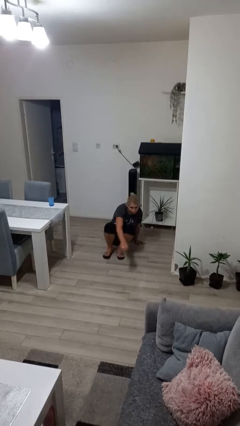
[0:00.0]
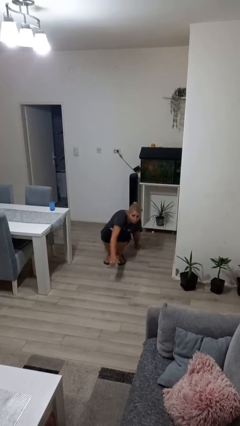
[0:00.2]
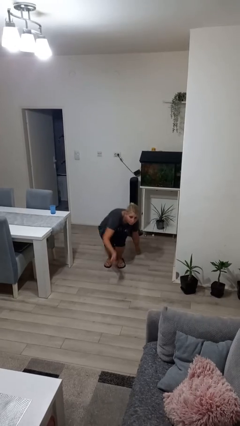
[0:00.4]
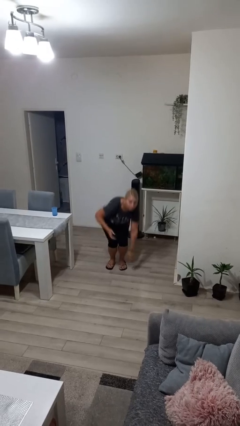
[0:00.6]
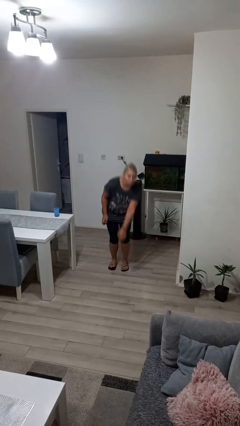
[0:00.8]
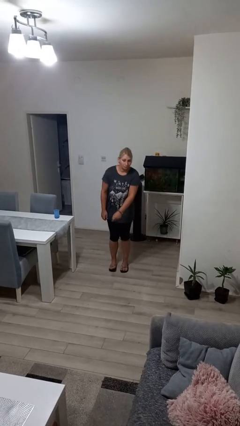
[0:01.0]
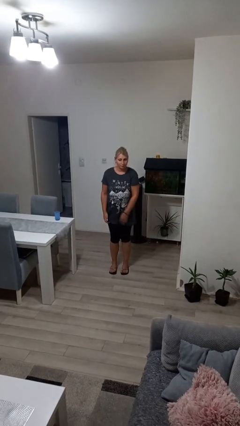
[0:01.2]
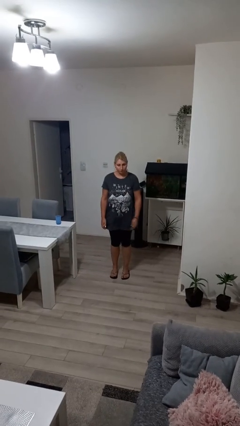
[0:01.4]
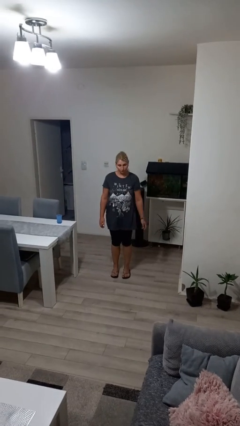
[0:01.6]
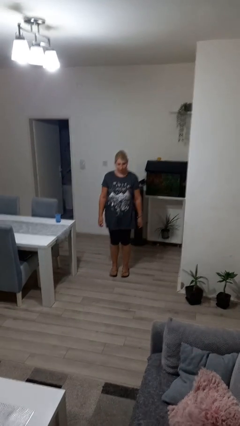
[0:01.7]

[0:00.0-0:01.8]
person stands up from floor

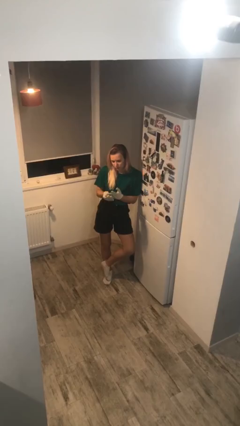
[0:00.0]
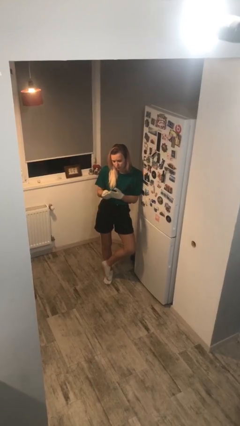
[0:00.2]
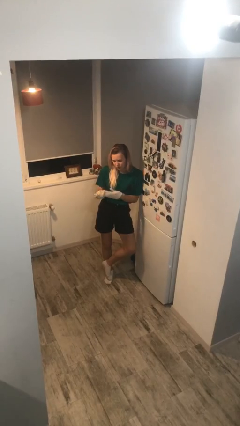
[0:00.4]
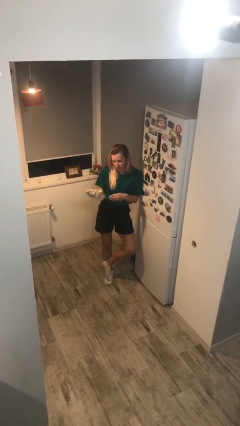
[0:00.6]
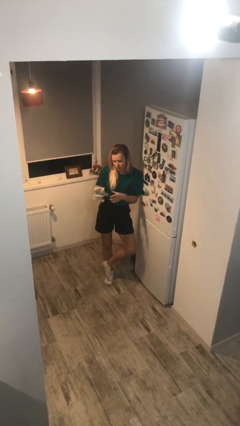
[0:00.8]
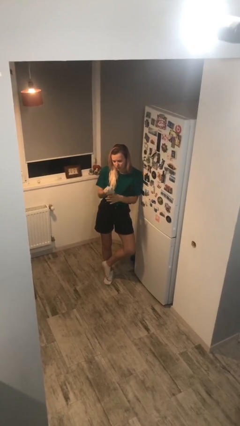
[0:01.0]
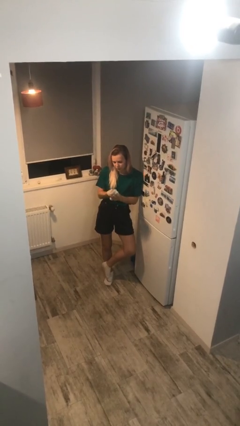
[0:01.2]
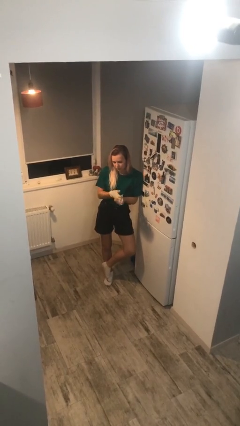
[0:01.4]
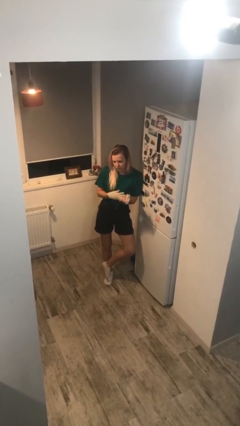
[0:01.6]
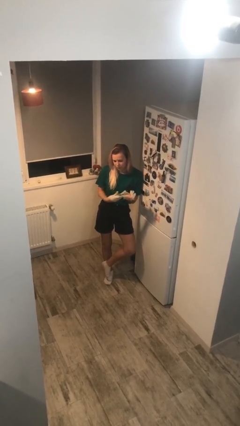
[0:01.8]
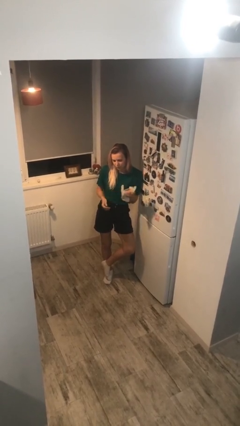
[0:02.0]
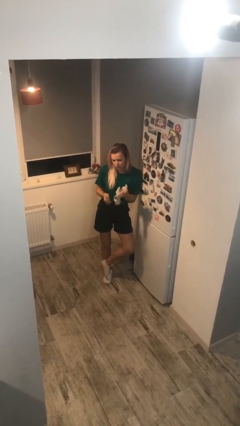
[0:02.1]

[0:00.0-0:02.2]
person takes off gloves

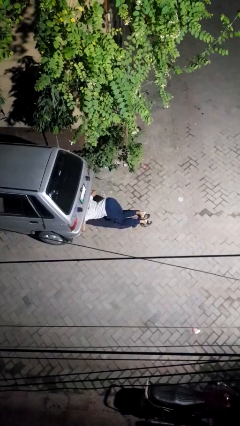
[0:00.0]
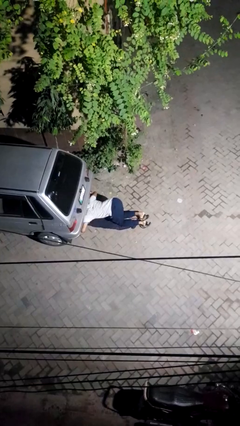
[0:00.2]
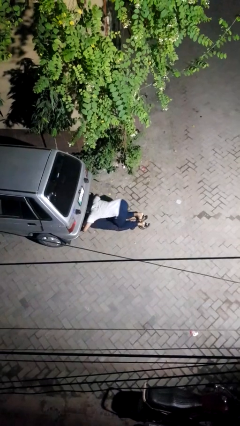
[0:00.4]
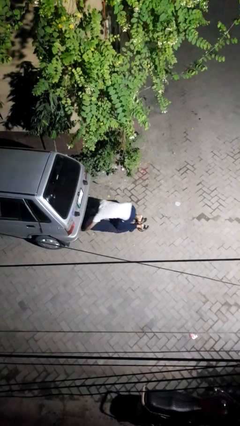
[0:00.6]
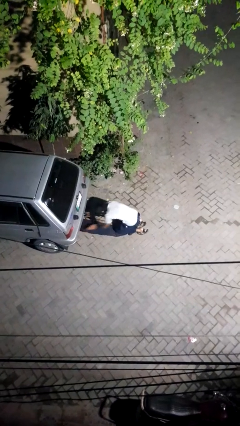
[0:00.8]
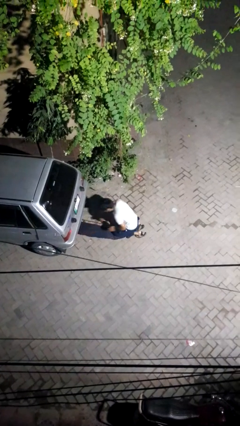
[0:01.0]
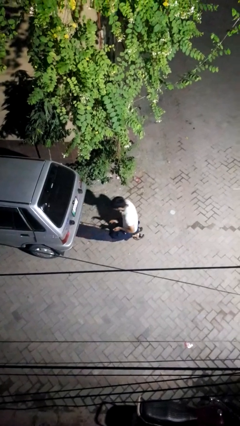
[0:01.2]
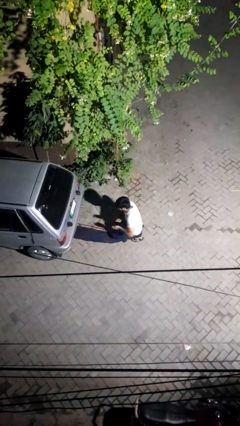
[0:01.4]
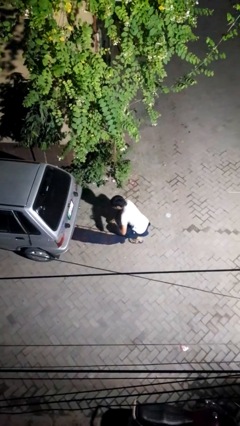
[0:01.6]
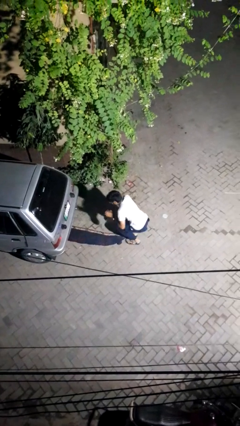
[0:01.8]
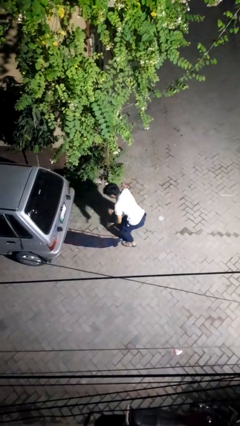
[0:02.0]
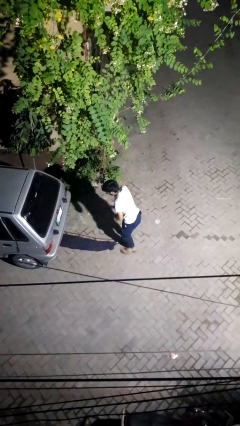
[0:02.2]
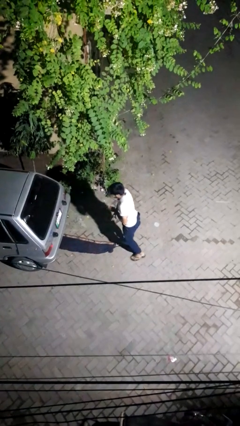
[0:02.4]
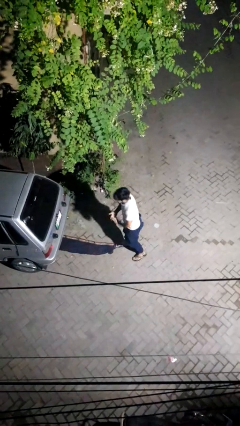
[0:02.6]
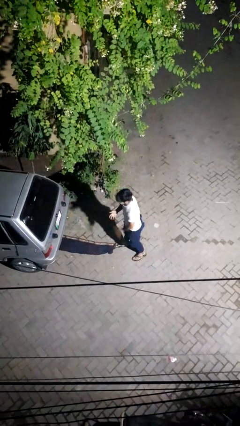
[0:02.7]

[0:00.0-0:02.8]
person crawls out from under vehicle

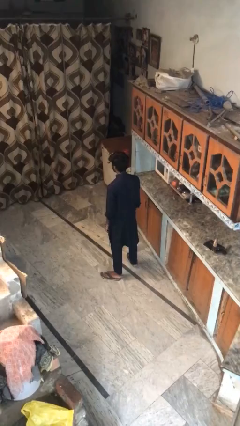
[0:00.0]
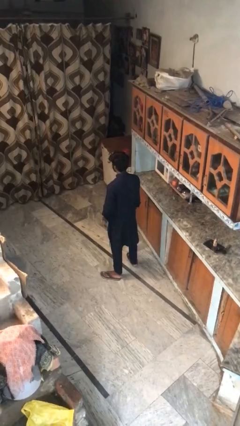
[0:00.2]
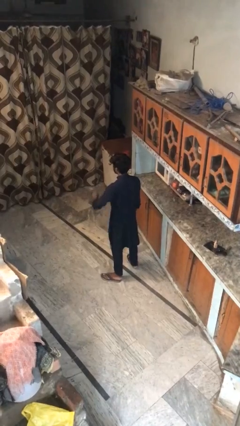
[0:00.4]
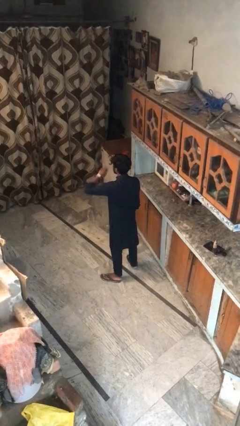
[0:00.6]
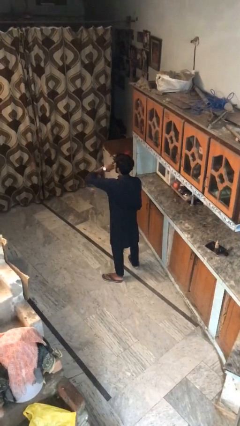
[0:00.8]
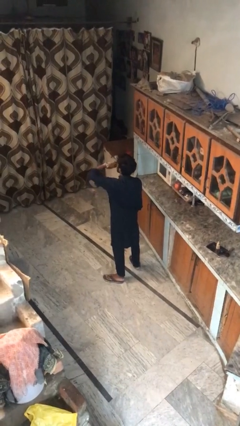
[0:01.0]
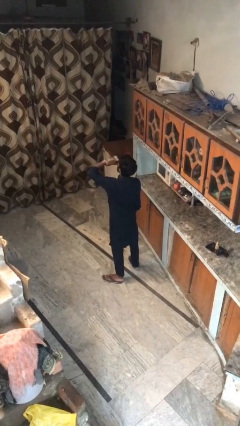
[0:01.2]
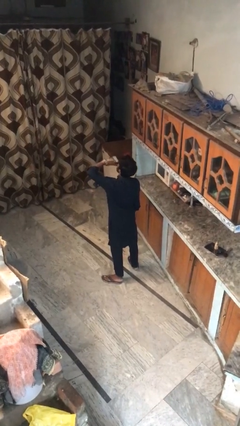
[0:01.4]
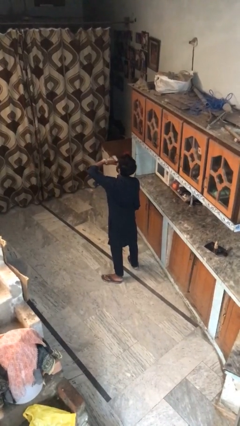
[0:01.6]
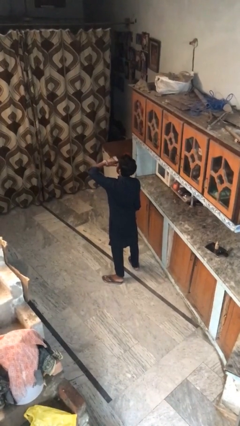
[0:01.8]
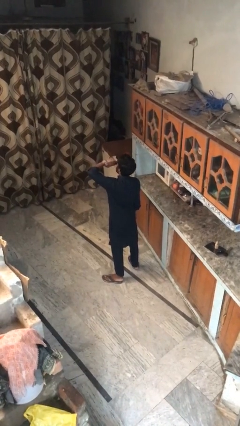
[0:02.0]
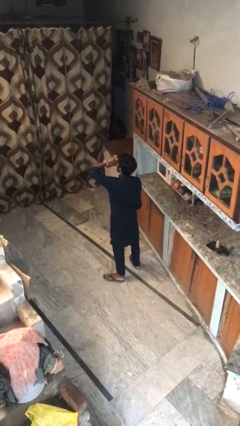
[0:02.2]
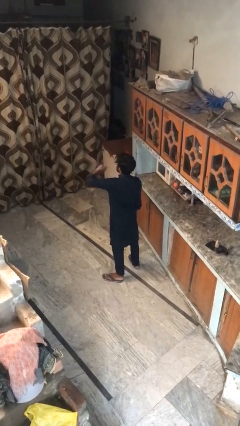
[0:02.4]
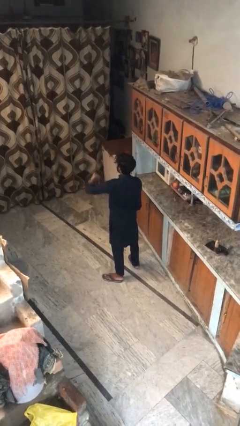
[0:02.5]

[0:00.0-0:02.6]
person yawns

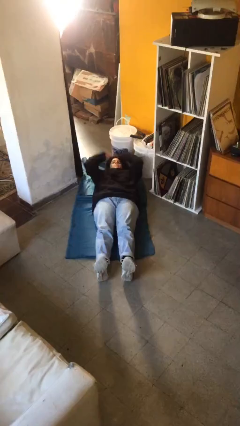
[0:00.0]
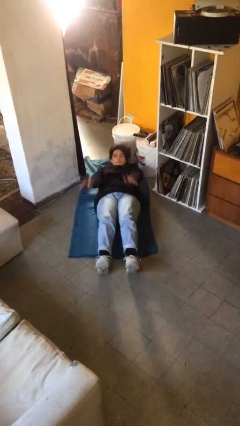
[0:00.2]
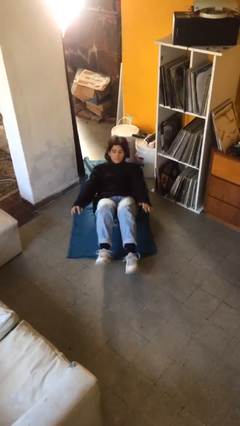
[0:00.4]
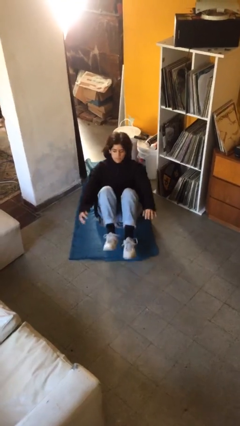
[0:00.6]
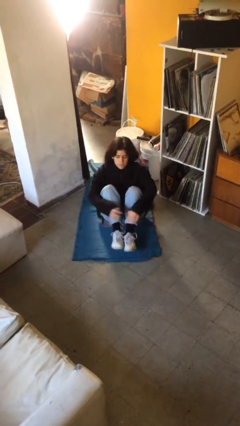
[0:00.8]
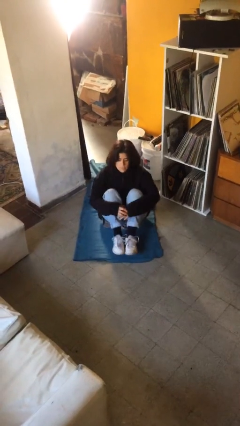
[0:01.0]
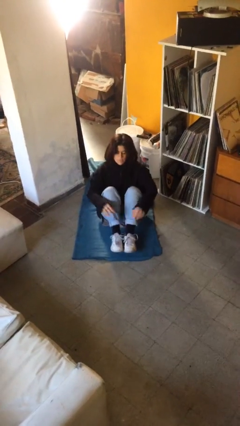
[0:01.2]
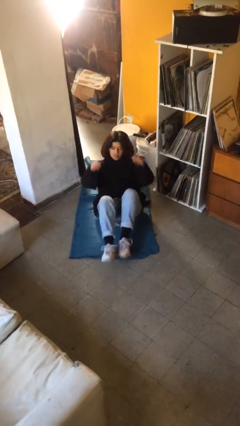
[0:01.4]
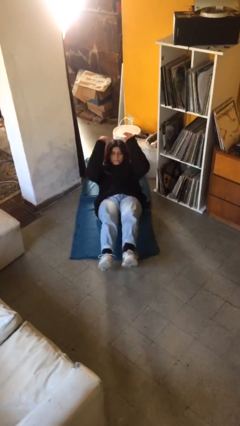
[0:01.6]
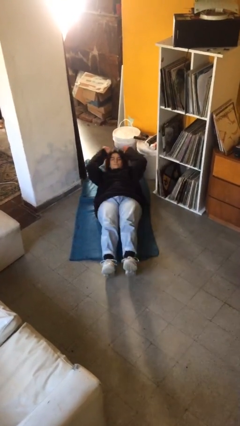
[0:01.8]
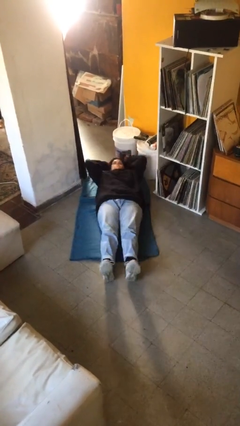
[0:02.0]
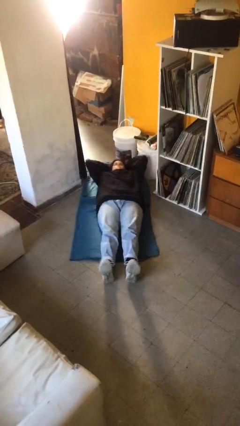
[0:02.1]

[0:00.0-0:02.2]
person exercises with situp

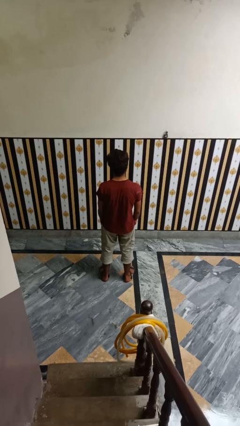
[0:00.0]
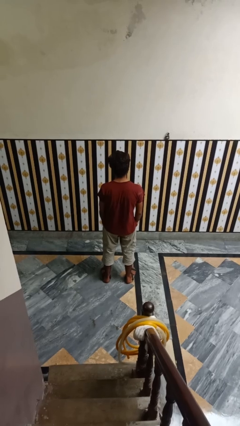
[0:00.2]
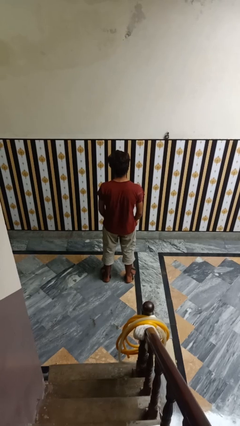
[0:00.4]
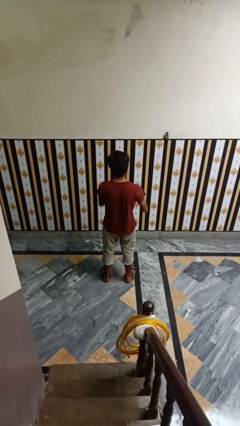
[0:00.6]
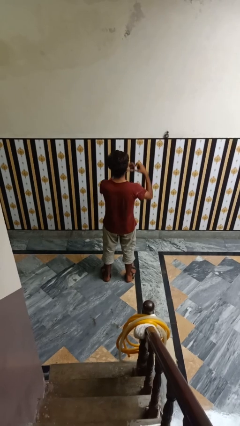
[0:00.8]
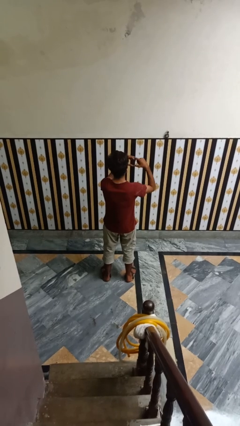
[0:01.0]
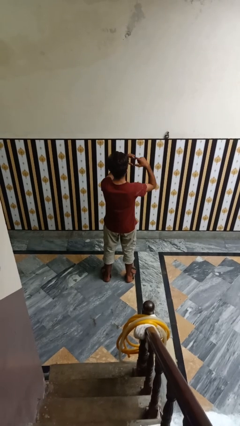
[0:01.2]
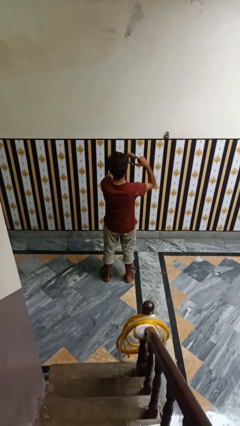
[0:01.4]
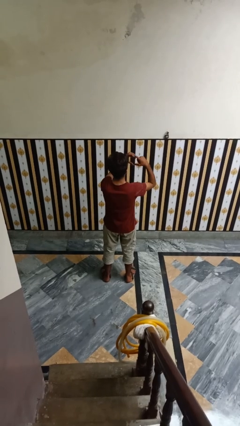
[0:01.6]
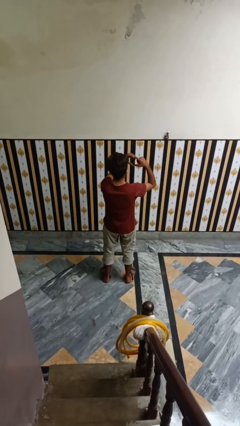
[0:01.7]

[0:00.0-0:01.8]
person gestures heart

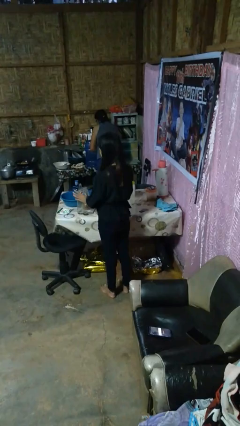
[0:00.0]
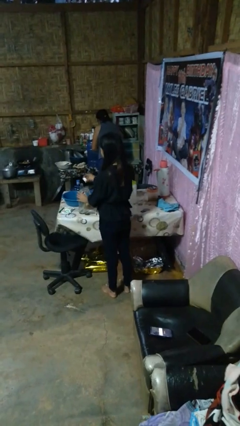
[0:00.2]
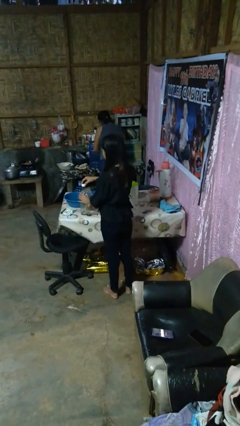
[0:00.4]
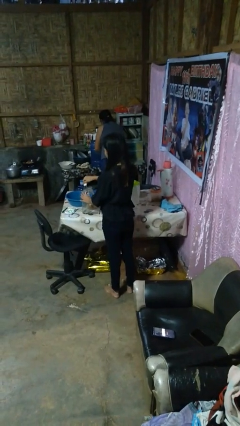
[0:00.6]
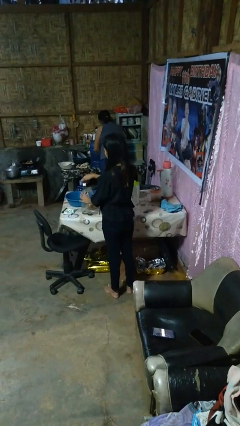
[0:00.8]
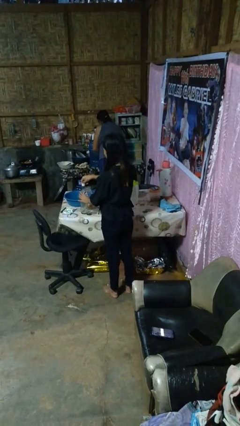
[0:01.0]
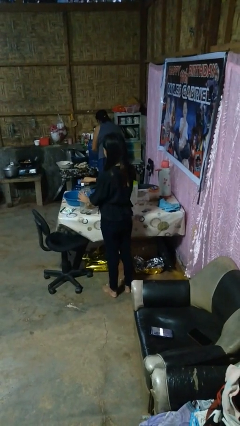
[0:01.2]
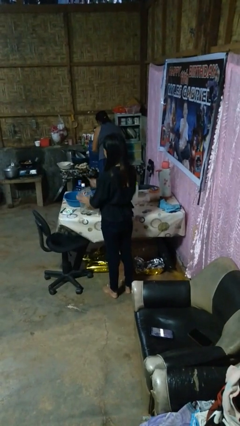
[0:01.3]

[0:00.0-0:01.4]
person screws lid to bottle

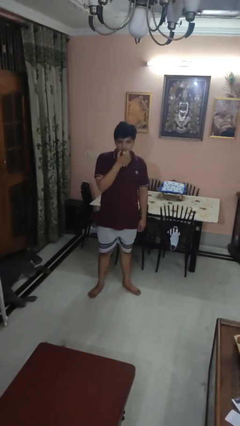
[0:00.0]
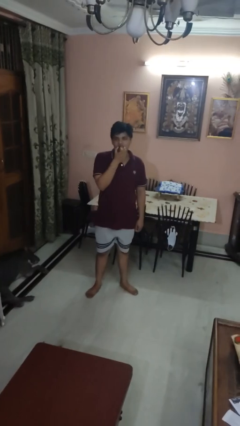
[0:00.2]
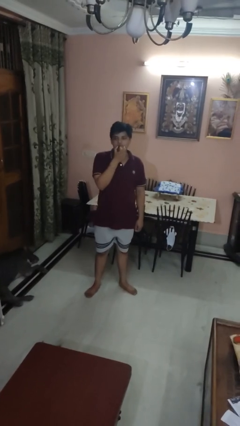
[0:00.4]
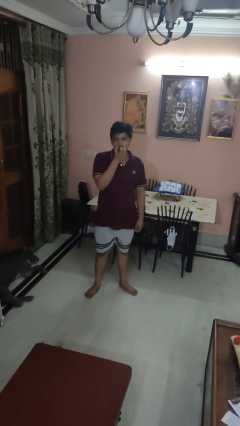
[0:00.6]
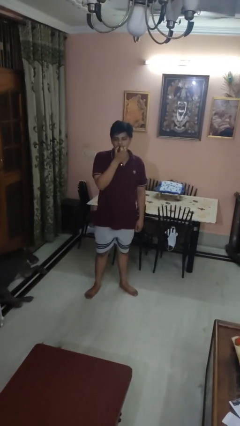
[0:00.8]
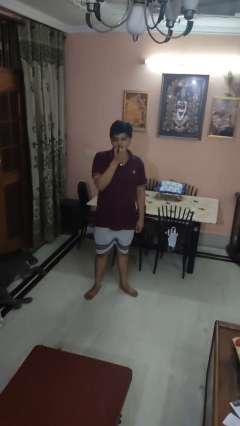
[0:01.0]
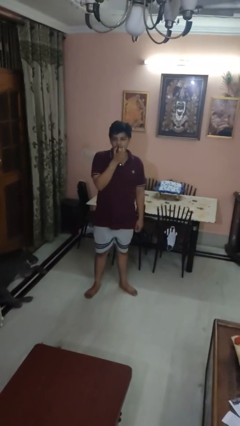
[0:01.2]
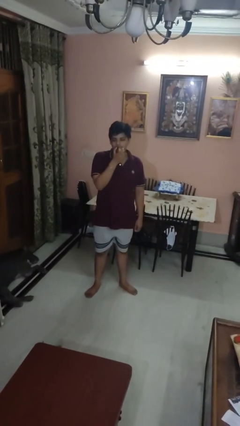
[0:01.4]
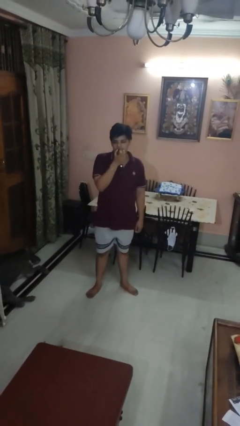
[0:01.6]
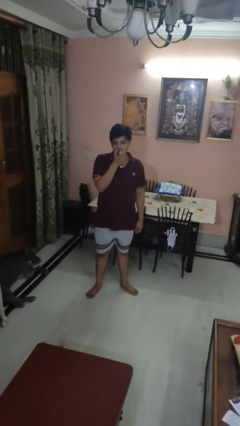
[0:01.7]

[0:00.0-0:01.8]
person eats apple

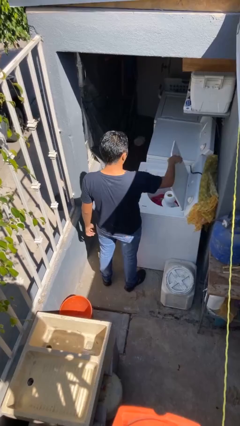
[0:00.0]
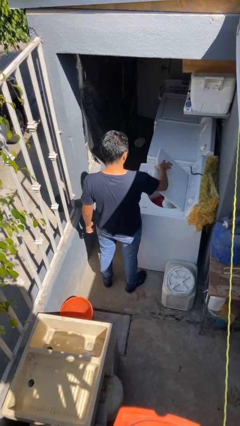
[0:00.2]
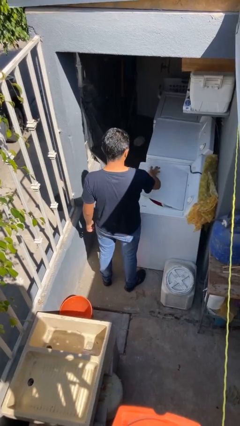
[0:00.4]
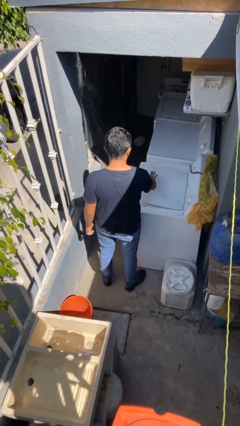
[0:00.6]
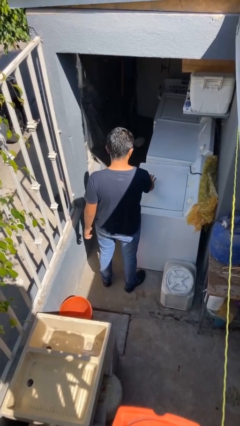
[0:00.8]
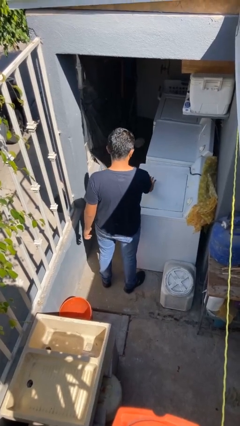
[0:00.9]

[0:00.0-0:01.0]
person closes clothes washer
